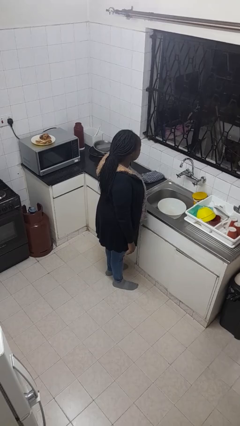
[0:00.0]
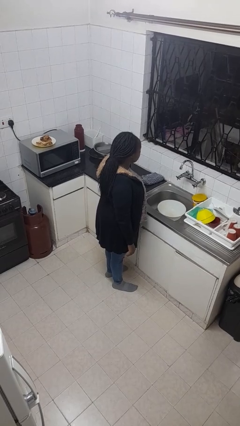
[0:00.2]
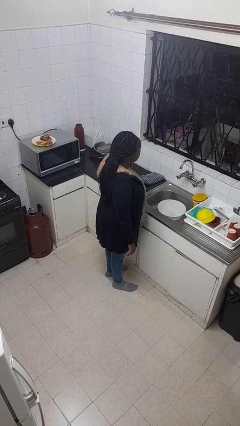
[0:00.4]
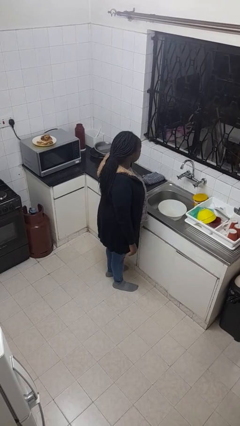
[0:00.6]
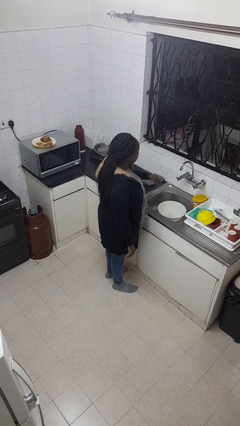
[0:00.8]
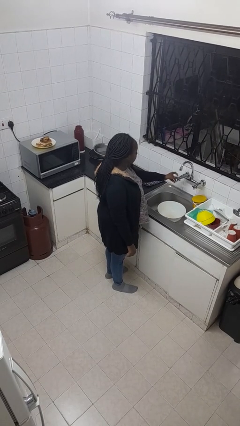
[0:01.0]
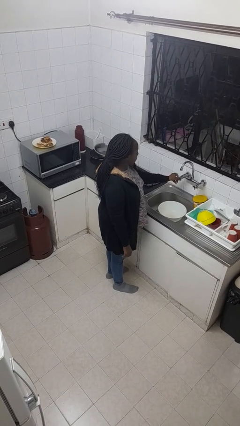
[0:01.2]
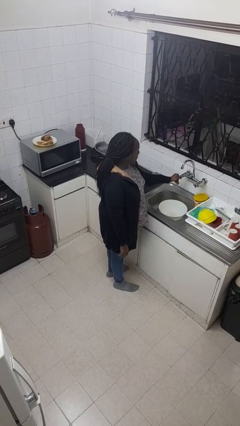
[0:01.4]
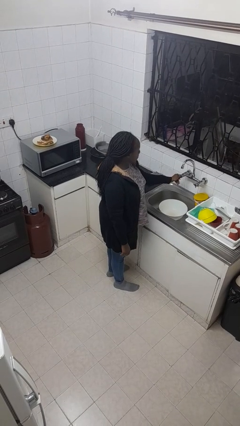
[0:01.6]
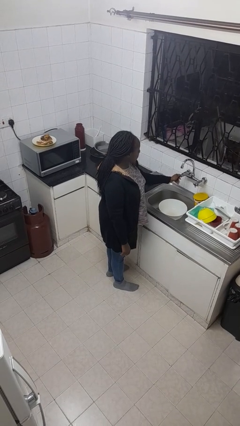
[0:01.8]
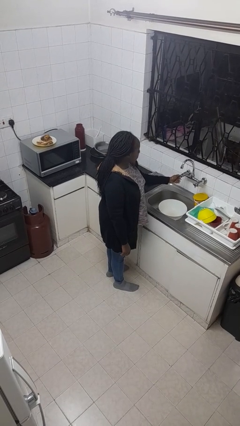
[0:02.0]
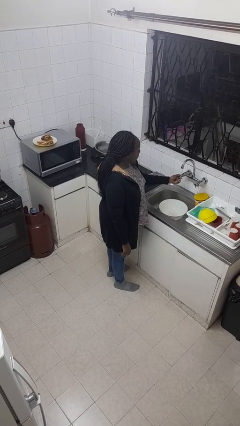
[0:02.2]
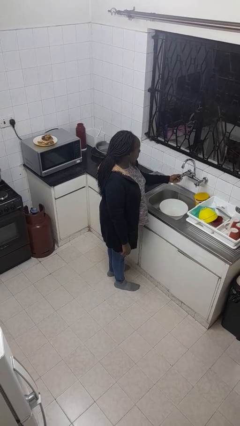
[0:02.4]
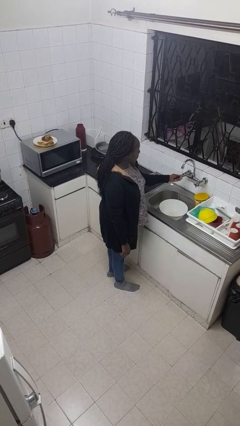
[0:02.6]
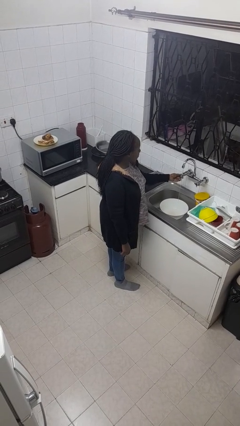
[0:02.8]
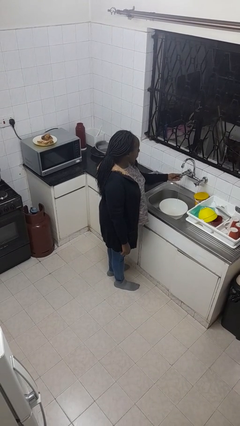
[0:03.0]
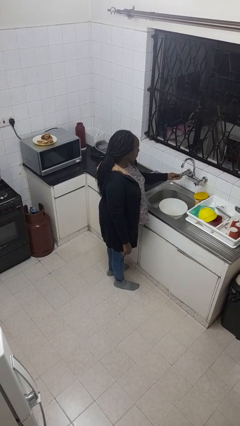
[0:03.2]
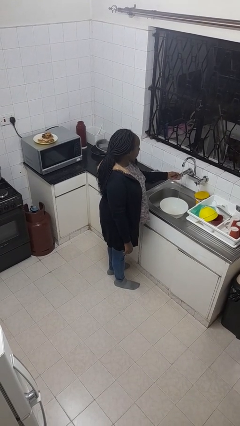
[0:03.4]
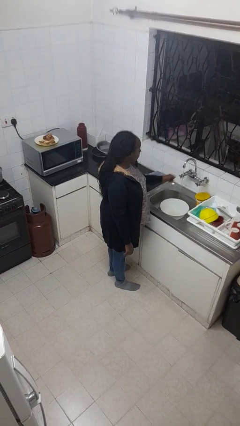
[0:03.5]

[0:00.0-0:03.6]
person turns on faucet

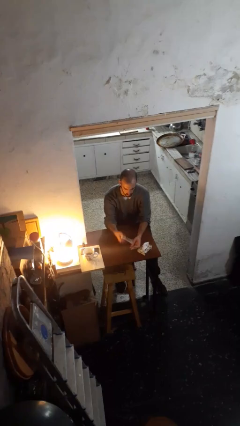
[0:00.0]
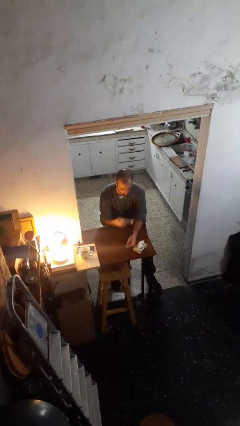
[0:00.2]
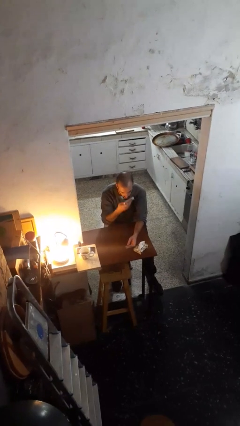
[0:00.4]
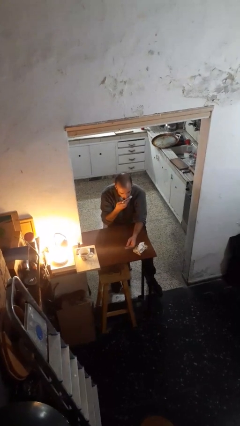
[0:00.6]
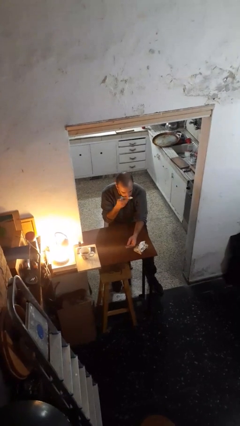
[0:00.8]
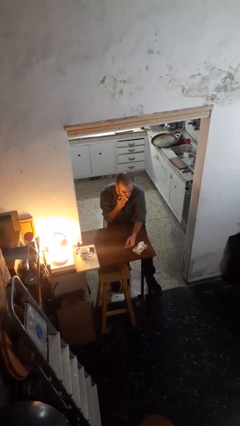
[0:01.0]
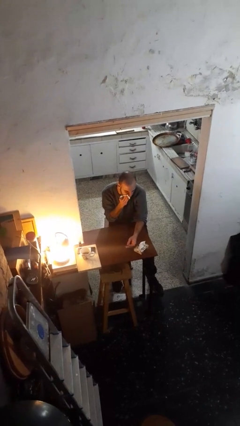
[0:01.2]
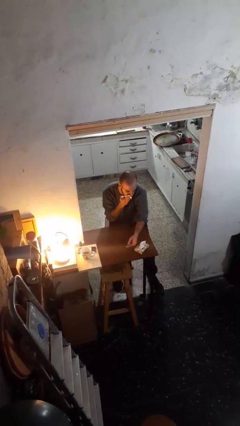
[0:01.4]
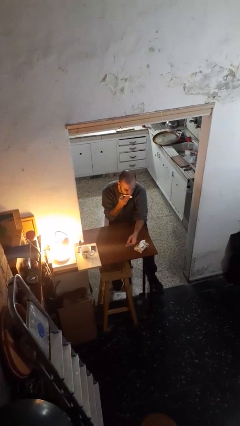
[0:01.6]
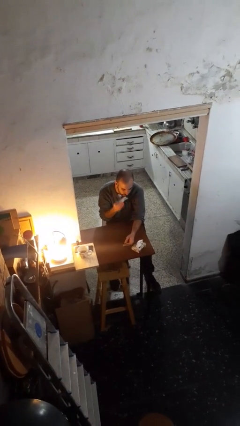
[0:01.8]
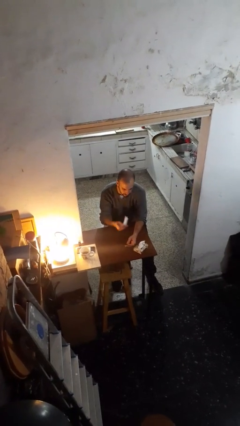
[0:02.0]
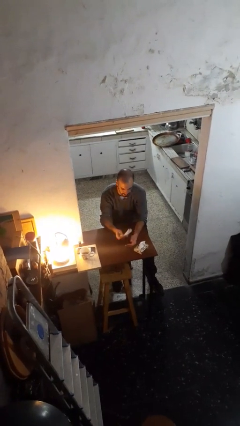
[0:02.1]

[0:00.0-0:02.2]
person wipes mouth with napkin

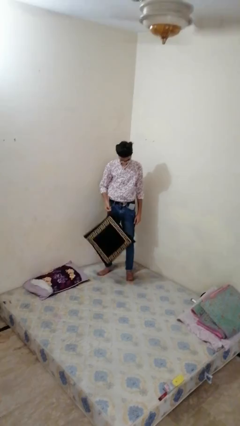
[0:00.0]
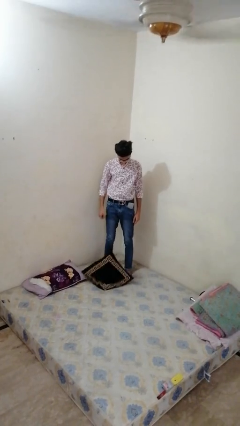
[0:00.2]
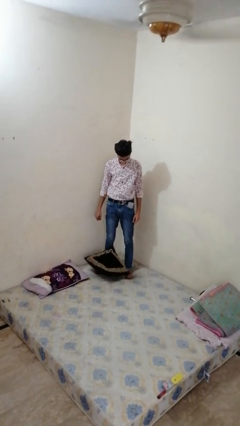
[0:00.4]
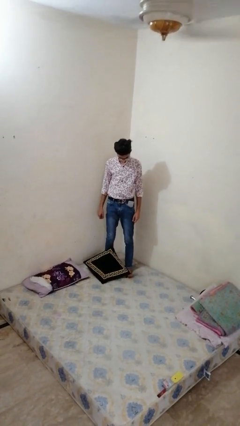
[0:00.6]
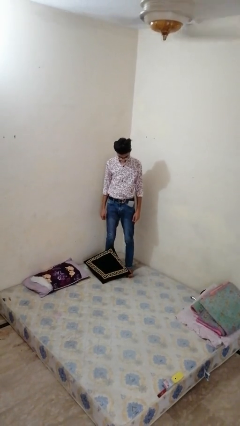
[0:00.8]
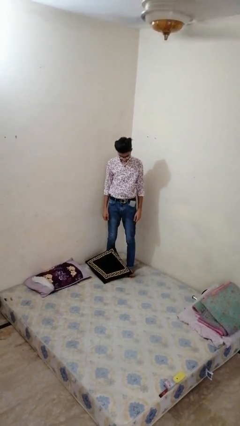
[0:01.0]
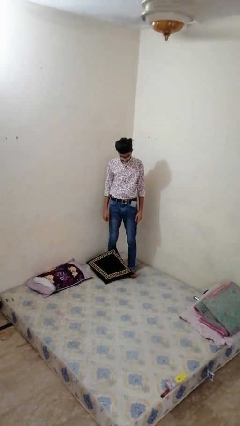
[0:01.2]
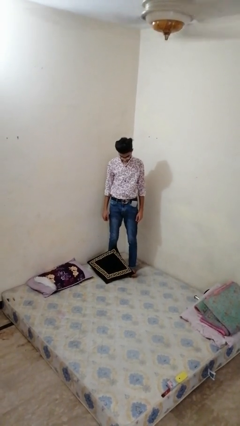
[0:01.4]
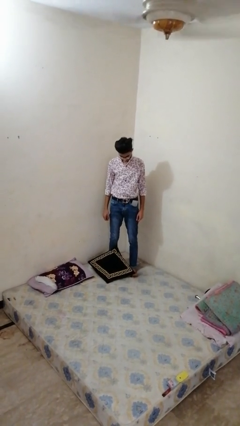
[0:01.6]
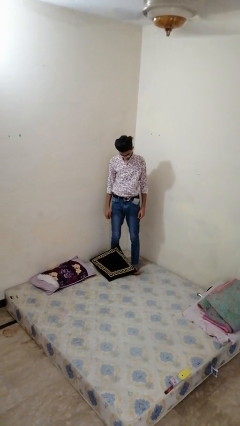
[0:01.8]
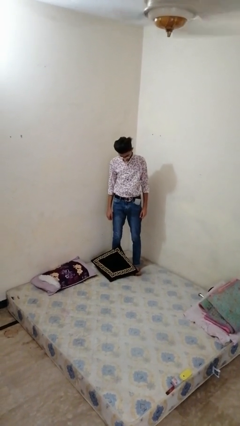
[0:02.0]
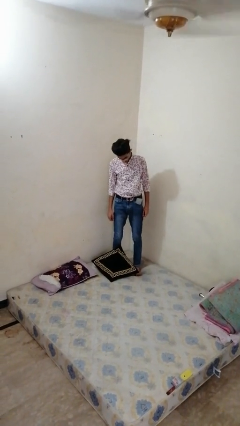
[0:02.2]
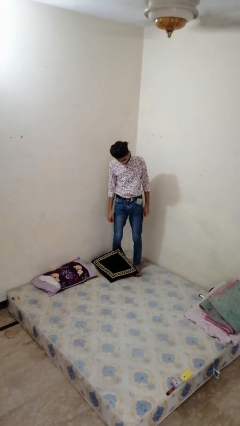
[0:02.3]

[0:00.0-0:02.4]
person throws object on bed

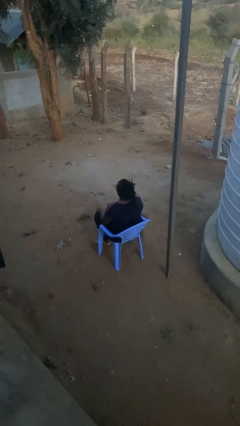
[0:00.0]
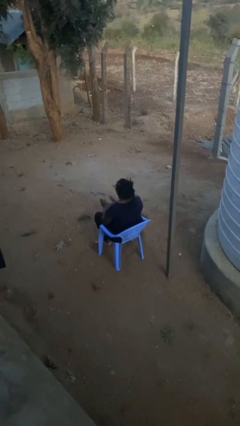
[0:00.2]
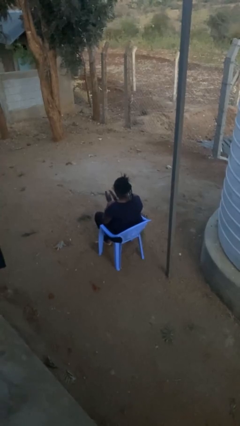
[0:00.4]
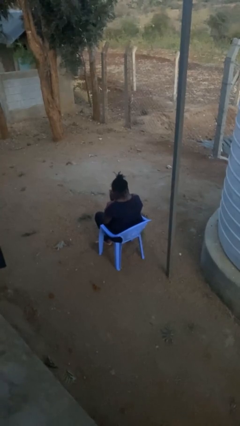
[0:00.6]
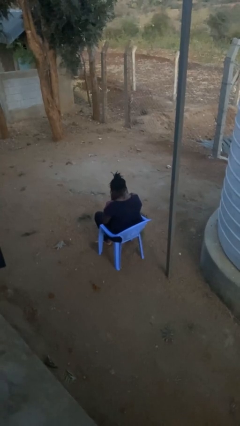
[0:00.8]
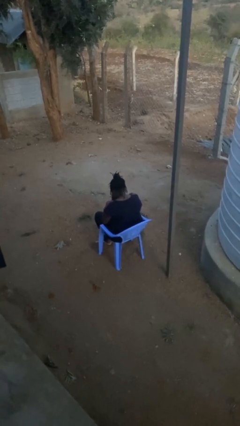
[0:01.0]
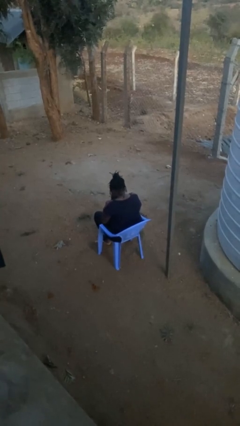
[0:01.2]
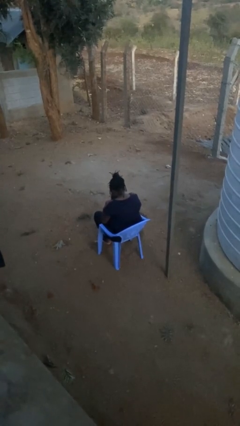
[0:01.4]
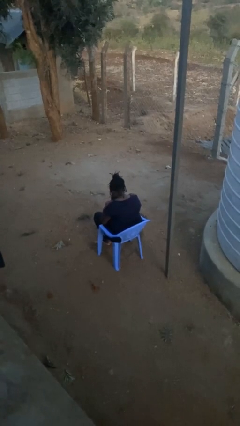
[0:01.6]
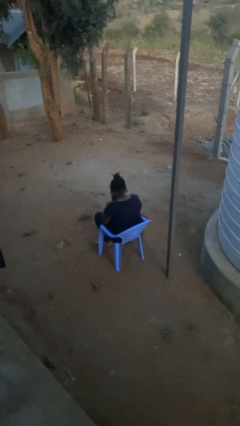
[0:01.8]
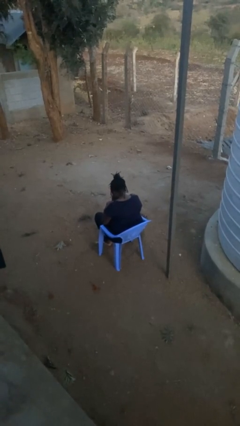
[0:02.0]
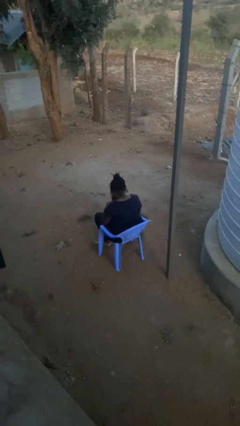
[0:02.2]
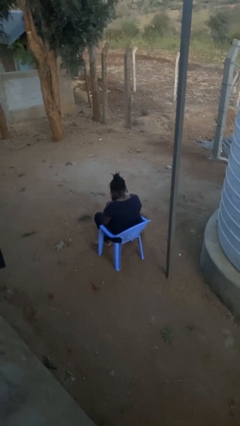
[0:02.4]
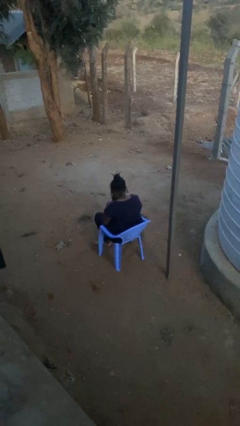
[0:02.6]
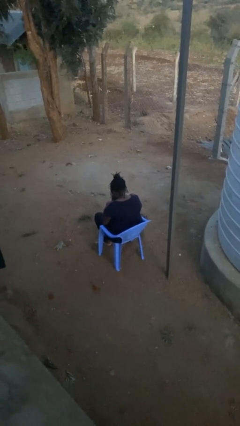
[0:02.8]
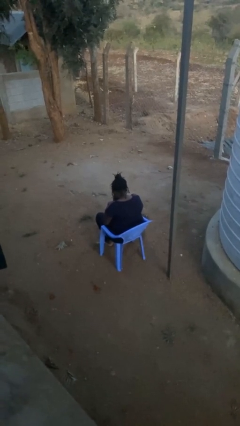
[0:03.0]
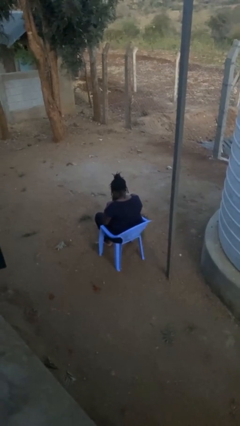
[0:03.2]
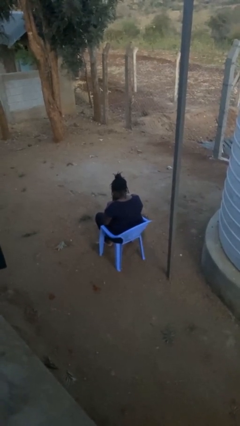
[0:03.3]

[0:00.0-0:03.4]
person prays

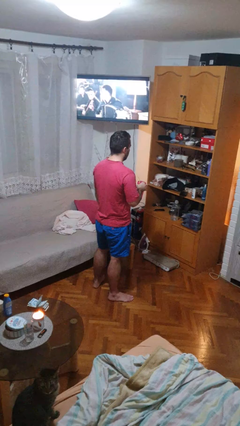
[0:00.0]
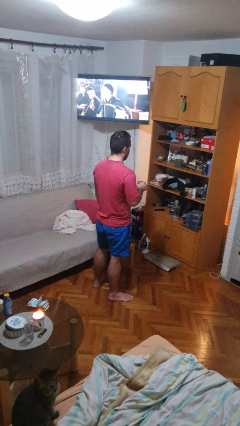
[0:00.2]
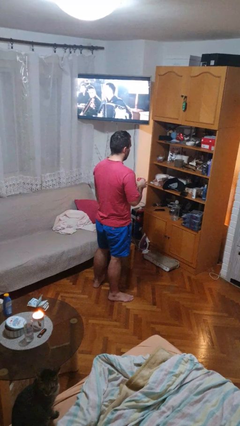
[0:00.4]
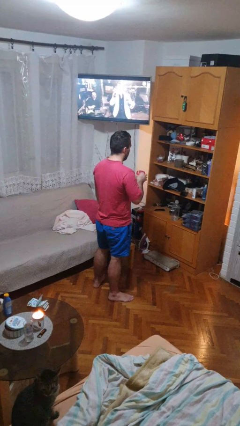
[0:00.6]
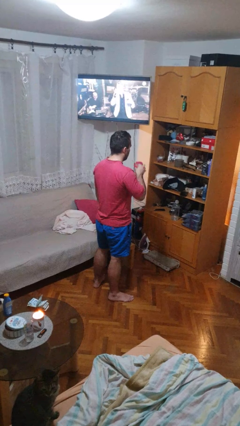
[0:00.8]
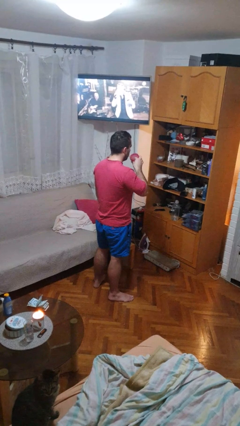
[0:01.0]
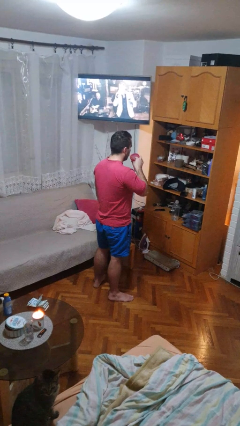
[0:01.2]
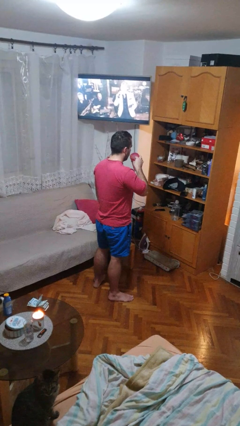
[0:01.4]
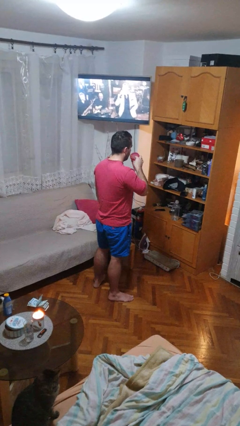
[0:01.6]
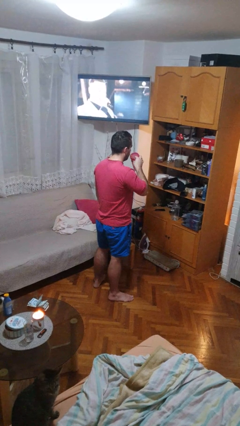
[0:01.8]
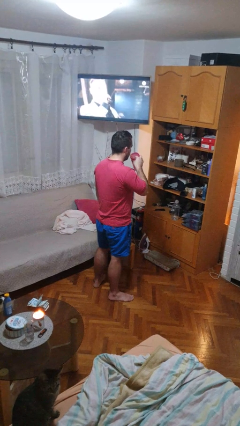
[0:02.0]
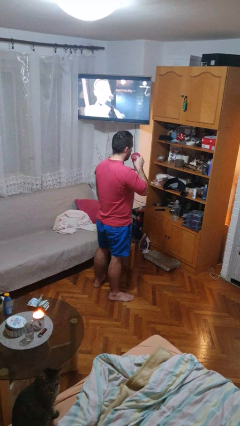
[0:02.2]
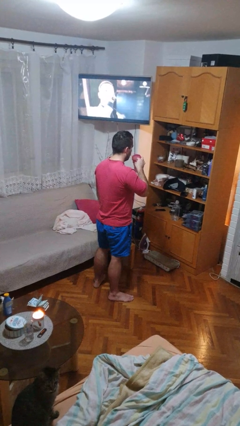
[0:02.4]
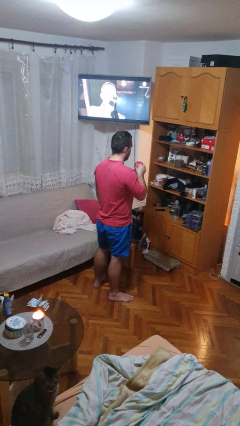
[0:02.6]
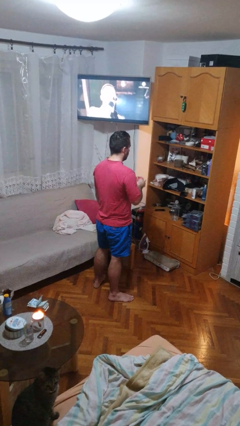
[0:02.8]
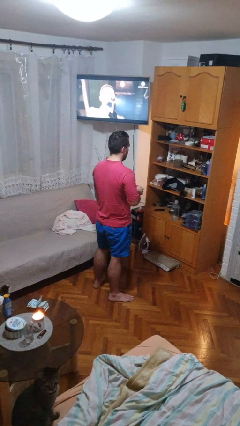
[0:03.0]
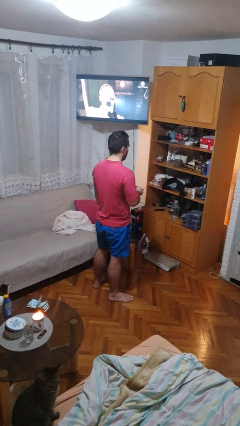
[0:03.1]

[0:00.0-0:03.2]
person drinks from straw

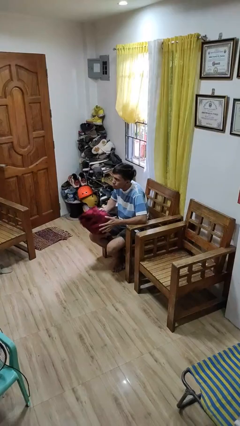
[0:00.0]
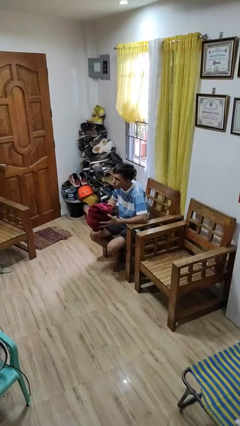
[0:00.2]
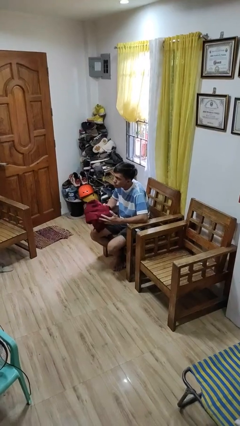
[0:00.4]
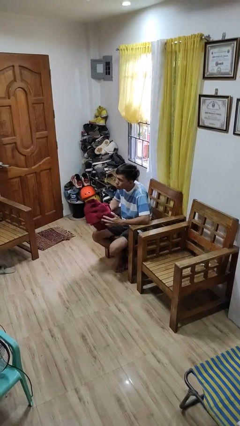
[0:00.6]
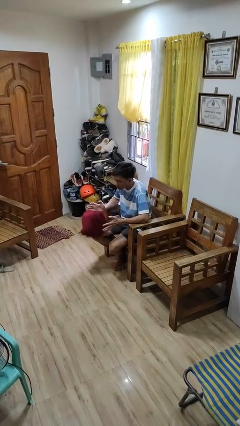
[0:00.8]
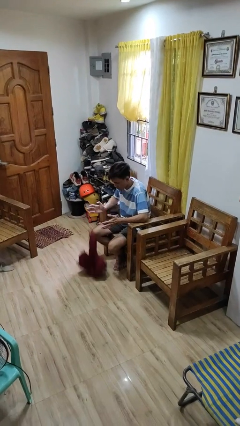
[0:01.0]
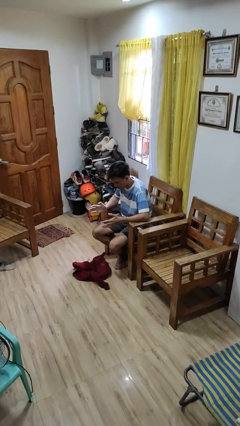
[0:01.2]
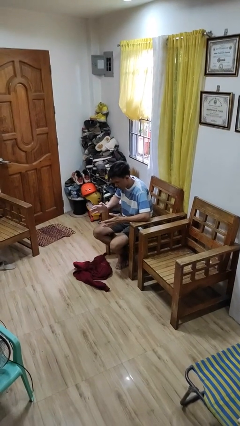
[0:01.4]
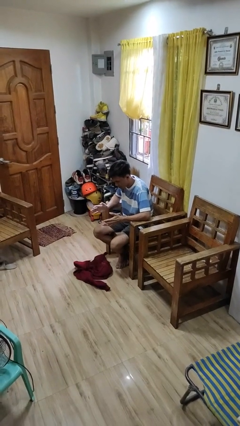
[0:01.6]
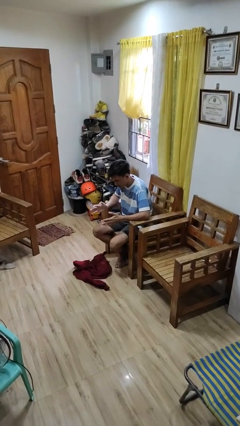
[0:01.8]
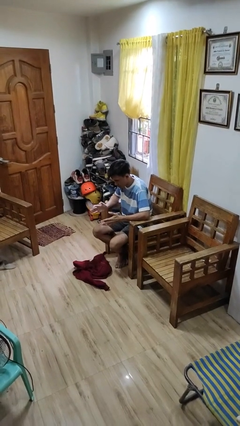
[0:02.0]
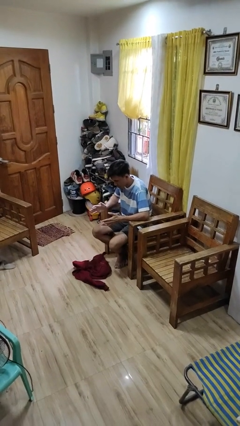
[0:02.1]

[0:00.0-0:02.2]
person drops object

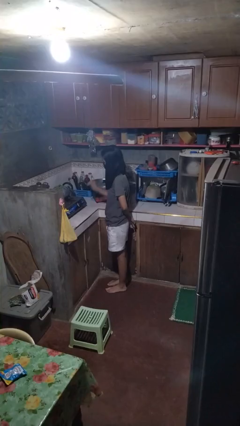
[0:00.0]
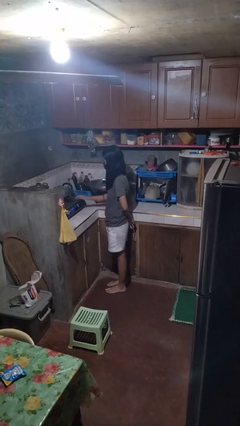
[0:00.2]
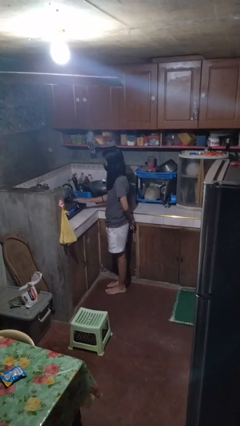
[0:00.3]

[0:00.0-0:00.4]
person burns hand
